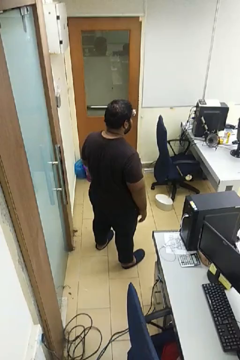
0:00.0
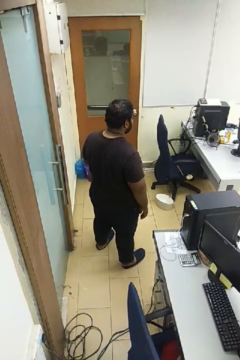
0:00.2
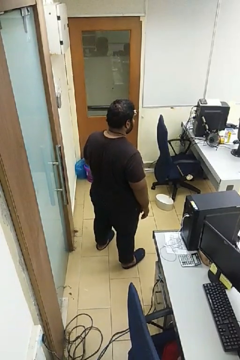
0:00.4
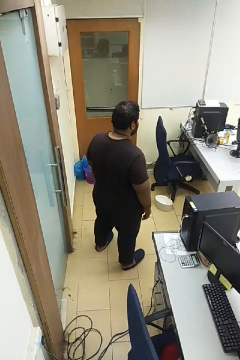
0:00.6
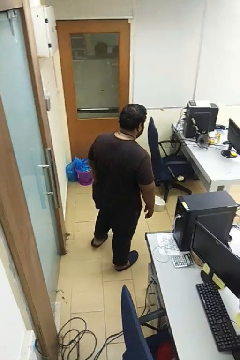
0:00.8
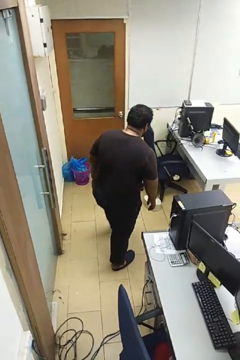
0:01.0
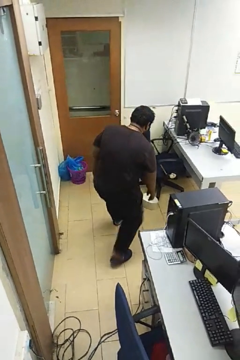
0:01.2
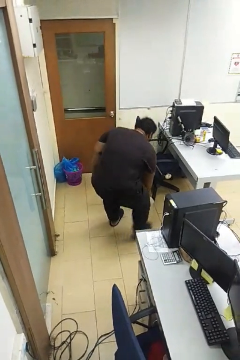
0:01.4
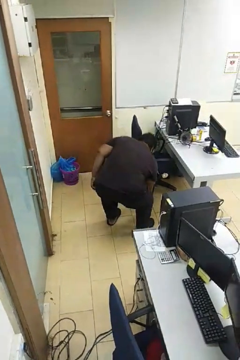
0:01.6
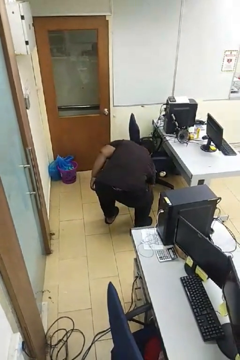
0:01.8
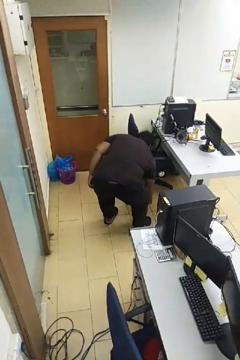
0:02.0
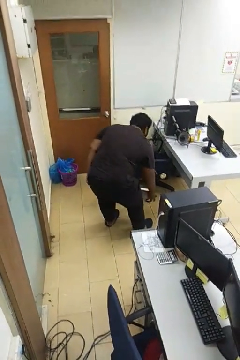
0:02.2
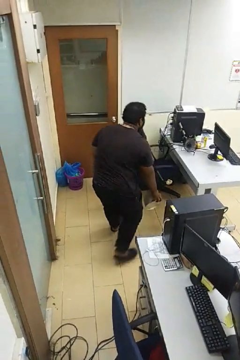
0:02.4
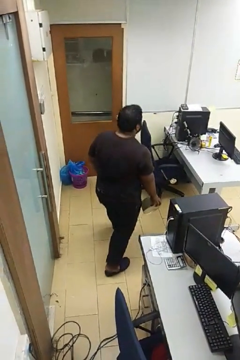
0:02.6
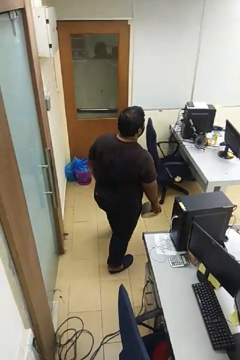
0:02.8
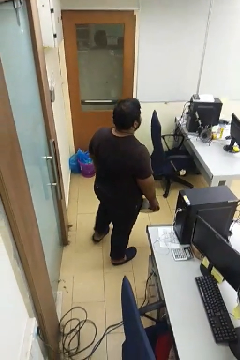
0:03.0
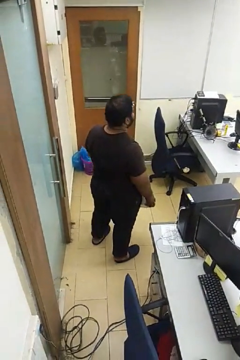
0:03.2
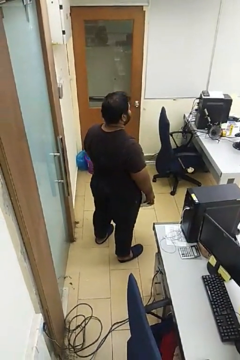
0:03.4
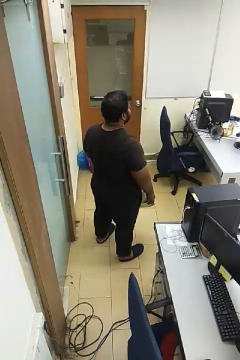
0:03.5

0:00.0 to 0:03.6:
person picks up object from floor

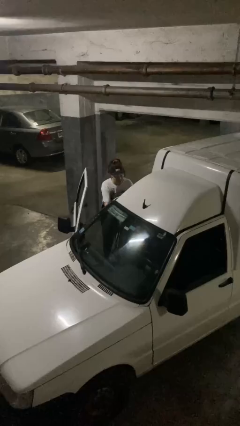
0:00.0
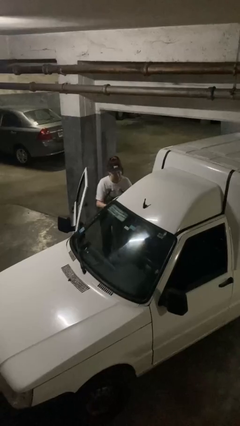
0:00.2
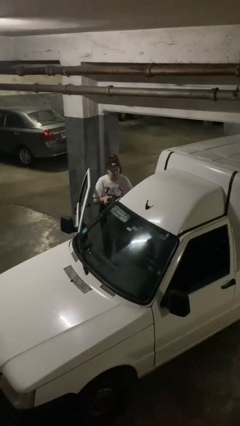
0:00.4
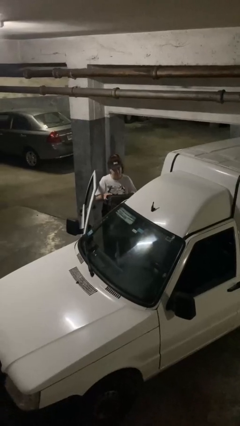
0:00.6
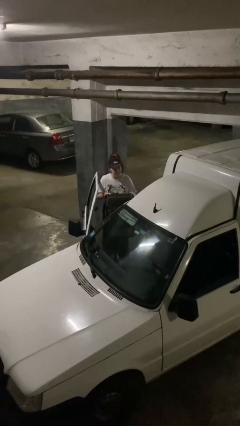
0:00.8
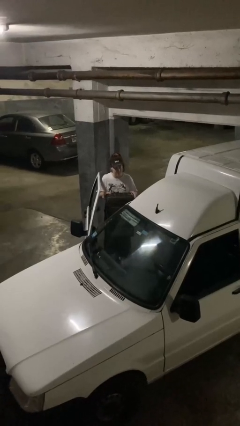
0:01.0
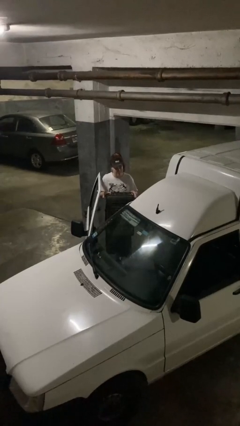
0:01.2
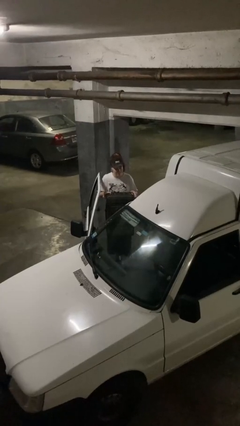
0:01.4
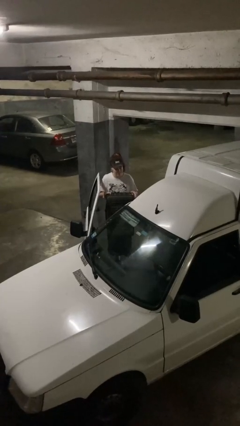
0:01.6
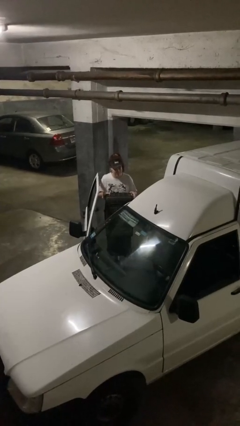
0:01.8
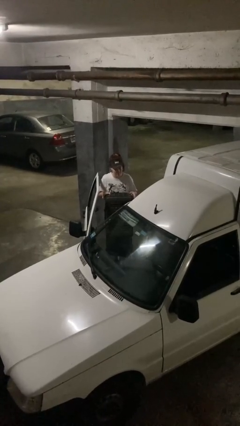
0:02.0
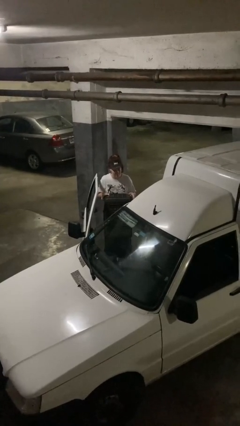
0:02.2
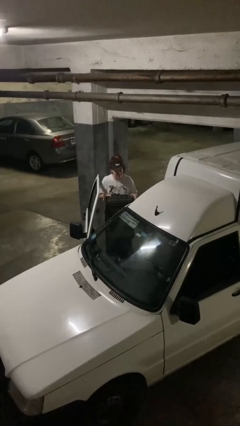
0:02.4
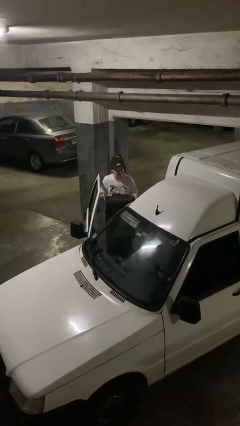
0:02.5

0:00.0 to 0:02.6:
person unloads car

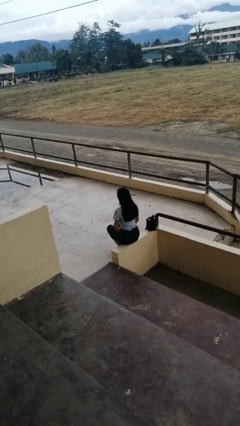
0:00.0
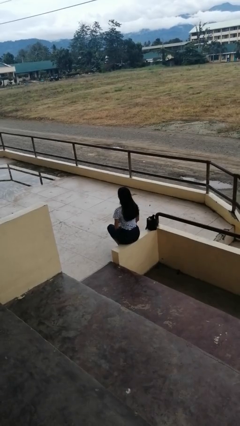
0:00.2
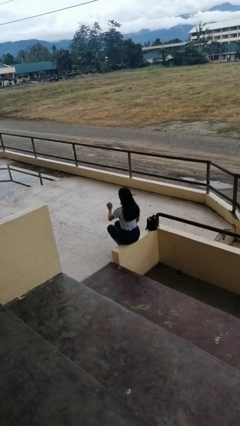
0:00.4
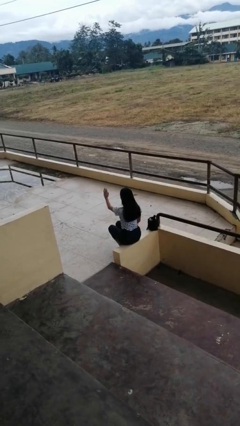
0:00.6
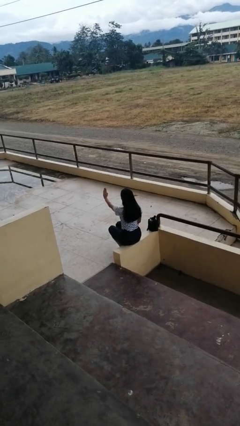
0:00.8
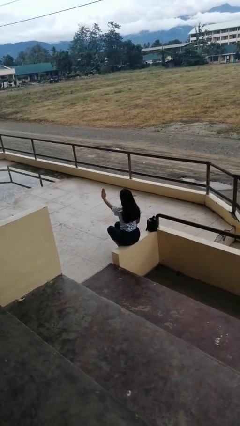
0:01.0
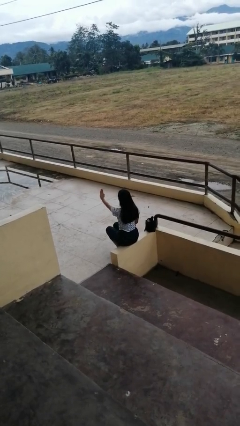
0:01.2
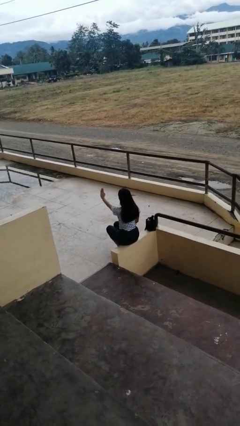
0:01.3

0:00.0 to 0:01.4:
person gestures stop

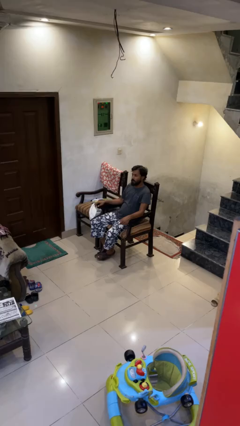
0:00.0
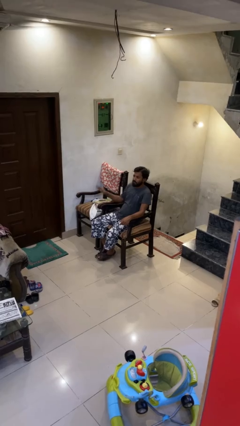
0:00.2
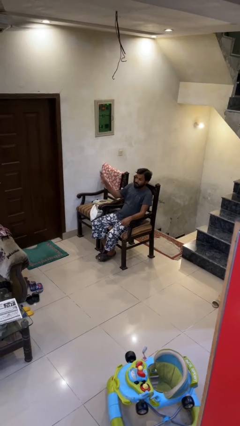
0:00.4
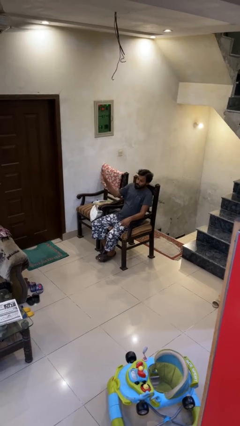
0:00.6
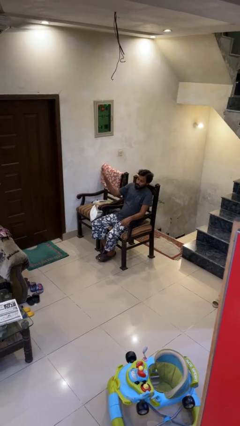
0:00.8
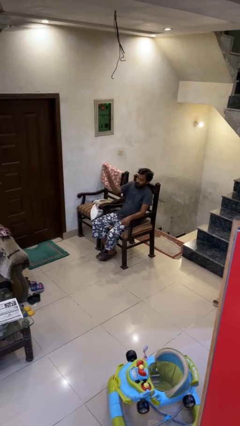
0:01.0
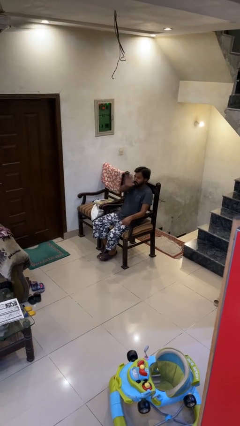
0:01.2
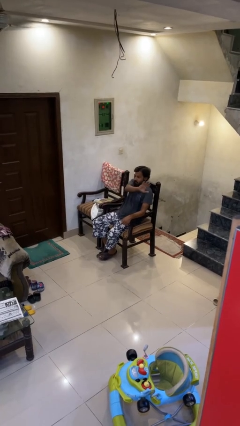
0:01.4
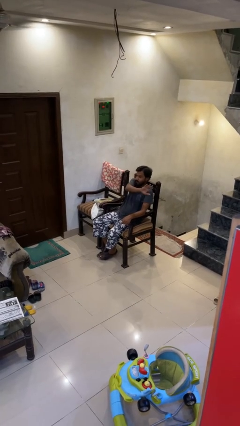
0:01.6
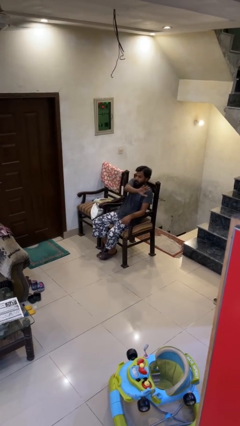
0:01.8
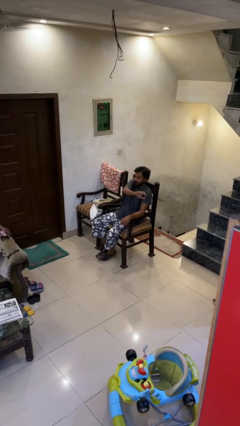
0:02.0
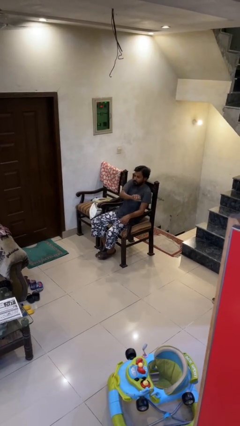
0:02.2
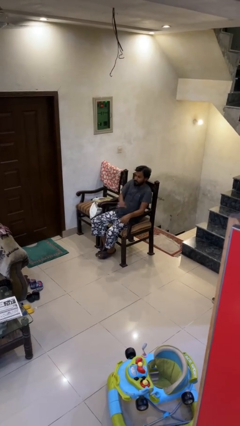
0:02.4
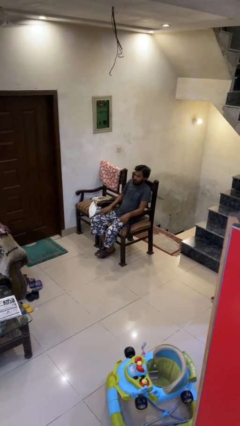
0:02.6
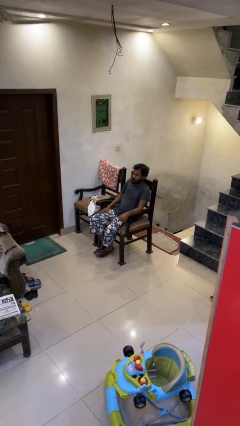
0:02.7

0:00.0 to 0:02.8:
person gestures swipe left

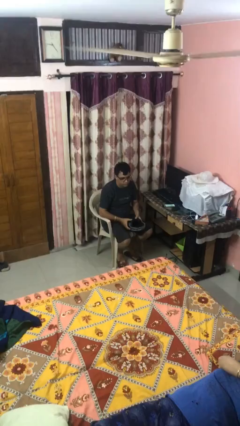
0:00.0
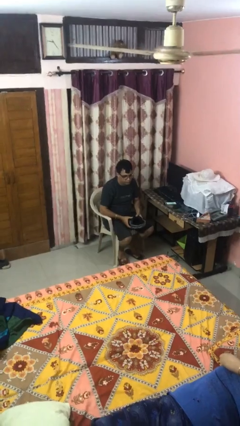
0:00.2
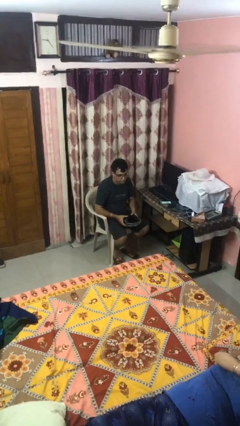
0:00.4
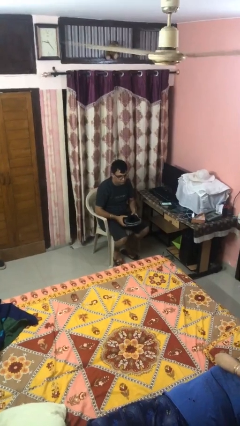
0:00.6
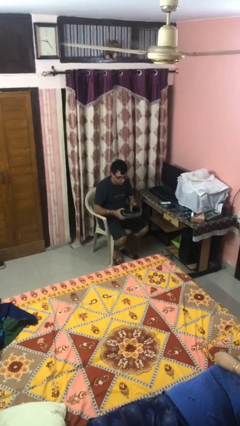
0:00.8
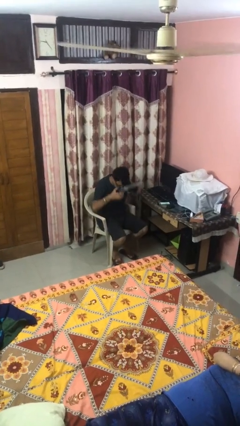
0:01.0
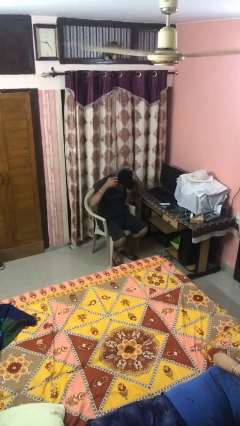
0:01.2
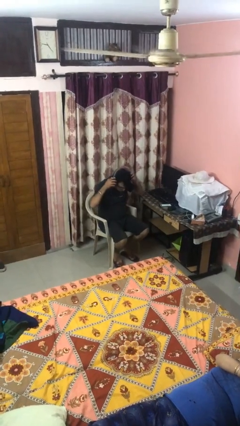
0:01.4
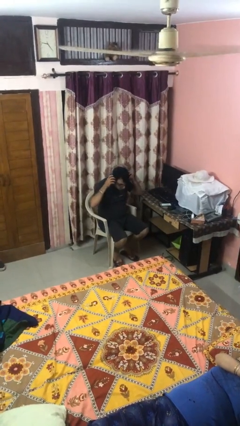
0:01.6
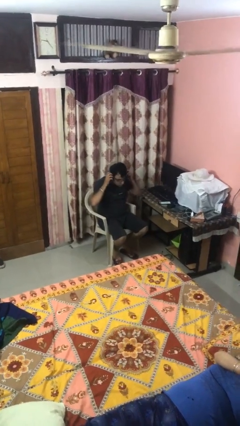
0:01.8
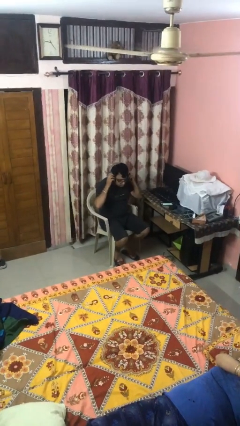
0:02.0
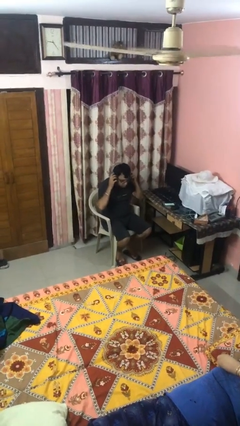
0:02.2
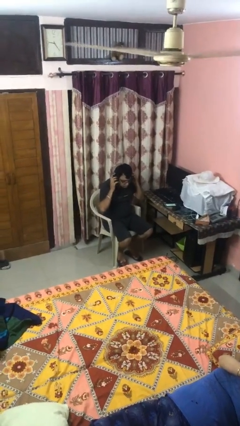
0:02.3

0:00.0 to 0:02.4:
person puts on headphones

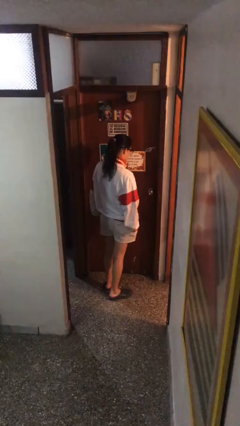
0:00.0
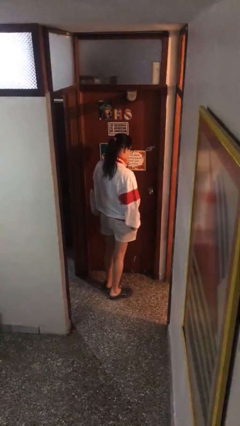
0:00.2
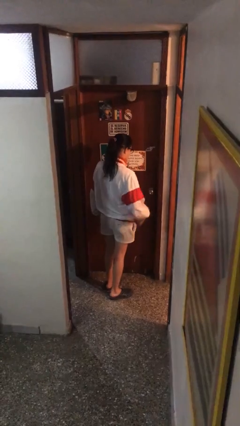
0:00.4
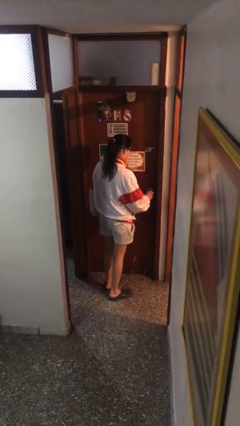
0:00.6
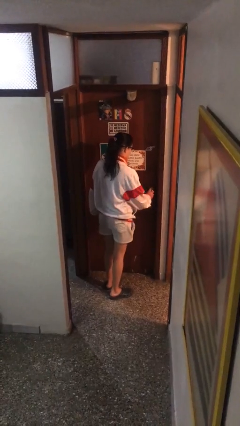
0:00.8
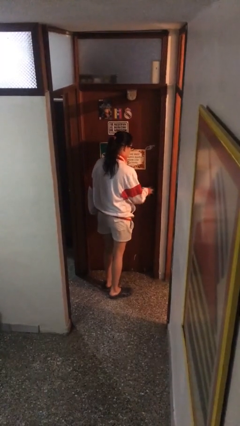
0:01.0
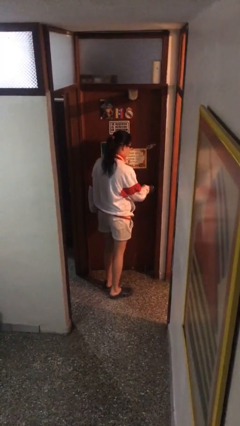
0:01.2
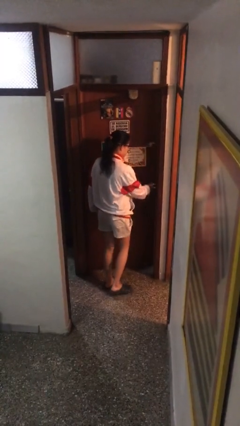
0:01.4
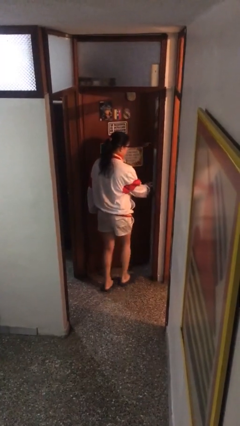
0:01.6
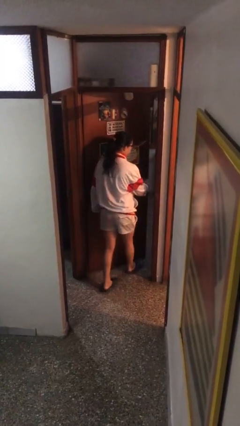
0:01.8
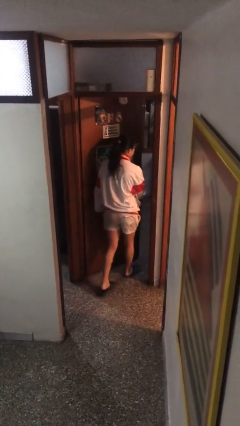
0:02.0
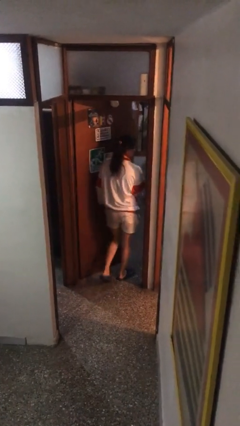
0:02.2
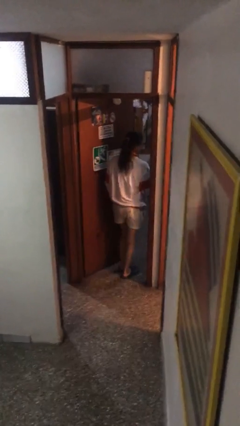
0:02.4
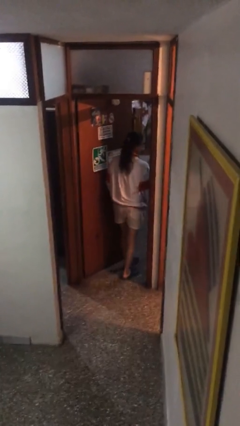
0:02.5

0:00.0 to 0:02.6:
person opens facility door

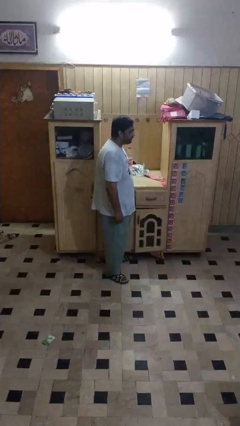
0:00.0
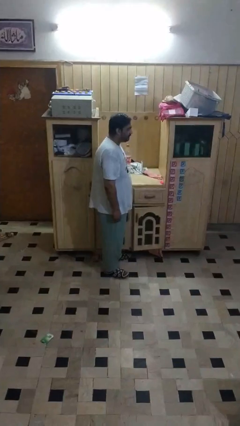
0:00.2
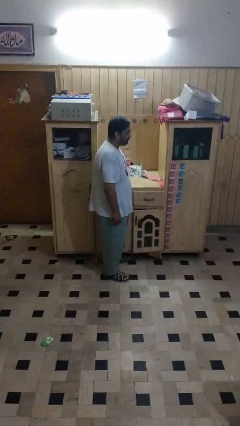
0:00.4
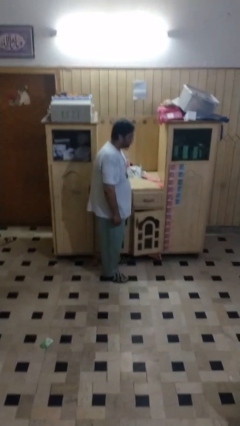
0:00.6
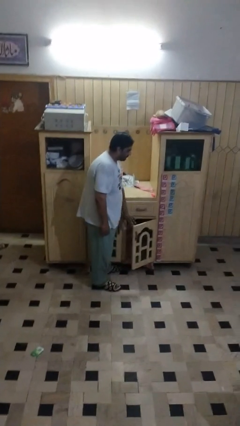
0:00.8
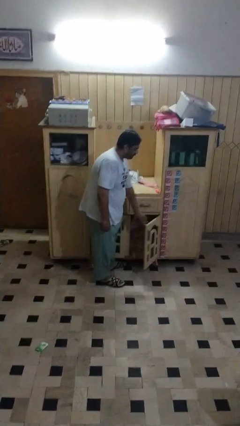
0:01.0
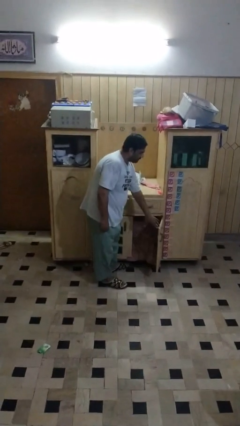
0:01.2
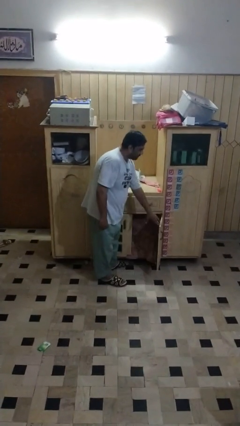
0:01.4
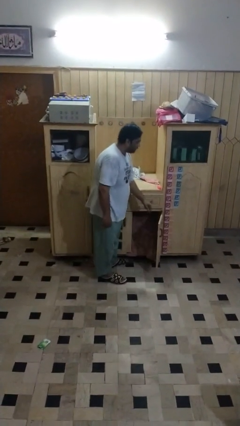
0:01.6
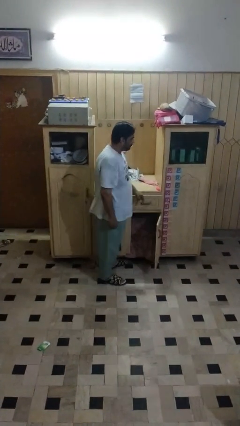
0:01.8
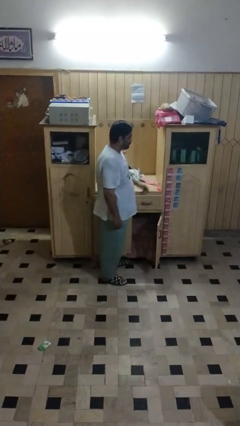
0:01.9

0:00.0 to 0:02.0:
person closes cabinet

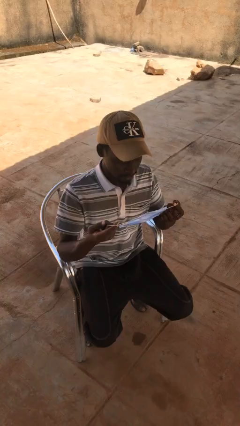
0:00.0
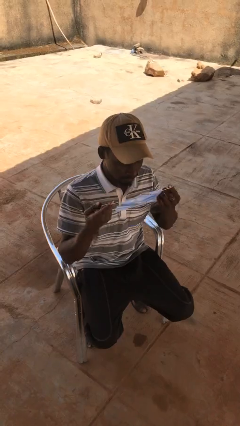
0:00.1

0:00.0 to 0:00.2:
person puts on facemask
